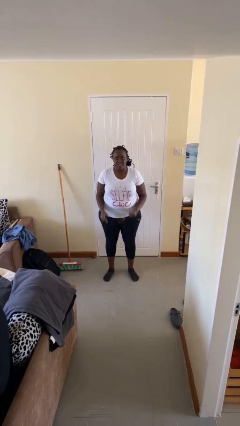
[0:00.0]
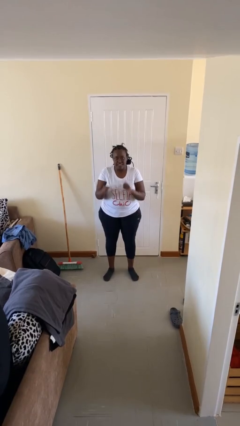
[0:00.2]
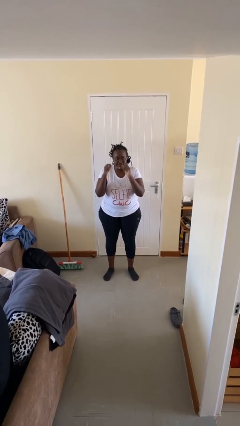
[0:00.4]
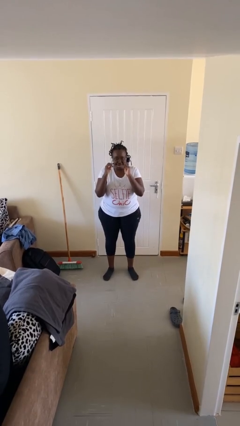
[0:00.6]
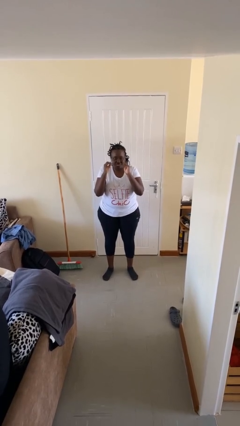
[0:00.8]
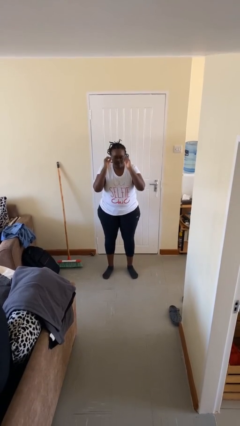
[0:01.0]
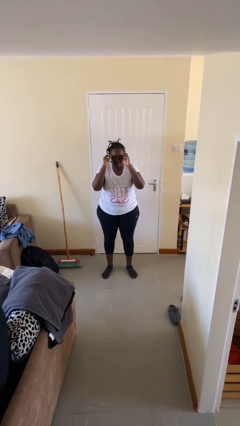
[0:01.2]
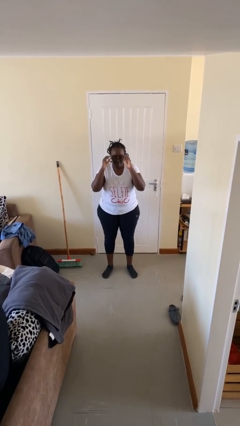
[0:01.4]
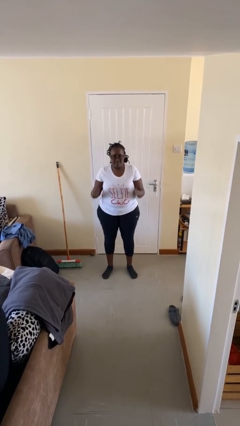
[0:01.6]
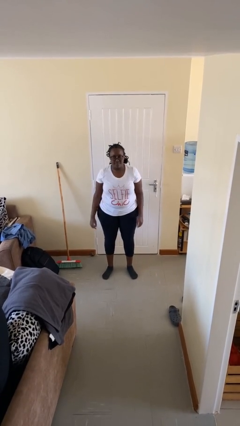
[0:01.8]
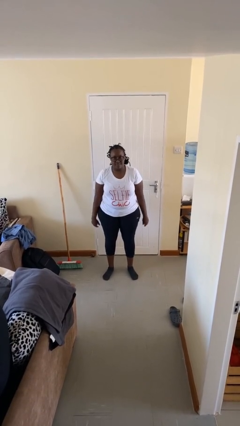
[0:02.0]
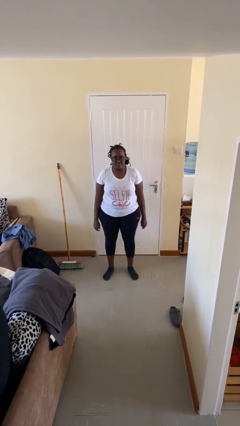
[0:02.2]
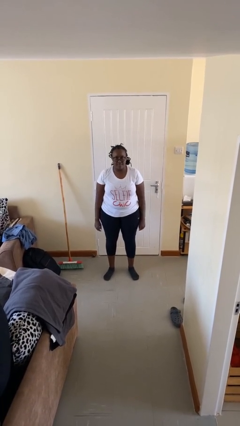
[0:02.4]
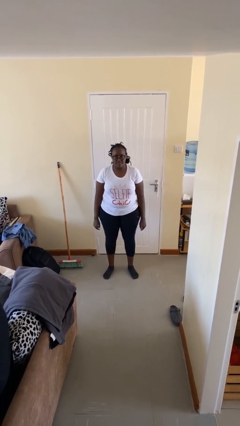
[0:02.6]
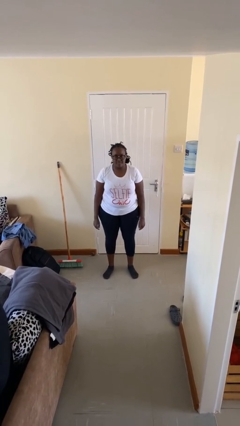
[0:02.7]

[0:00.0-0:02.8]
person puts on glasses

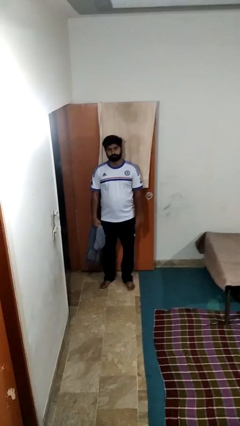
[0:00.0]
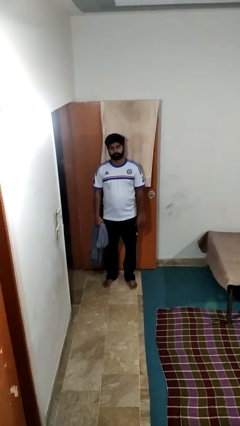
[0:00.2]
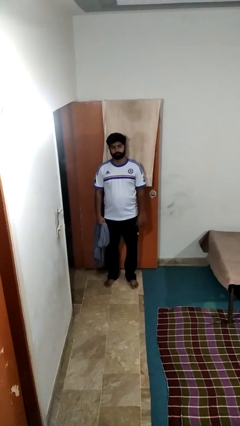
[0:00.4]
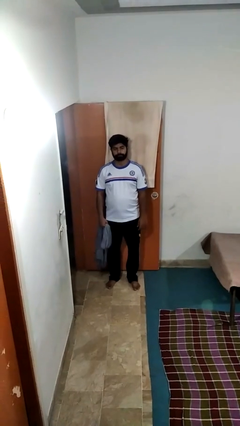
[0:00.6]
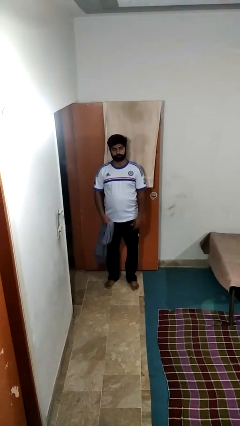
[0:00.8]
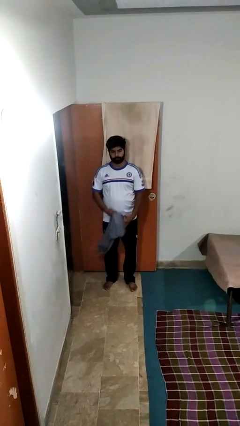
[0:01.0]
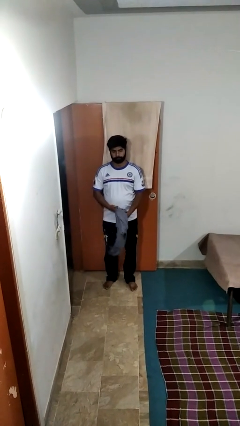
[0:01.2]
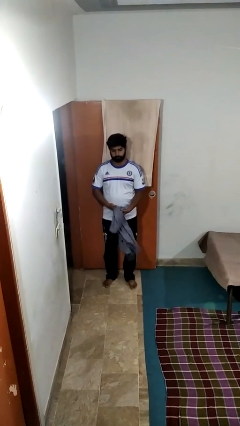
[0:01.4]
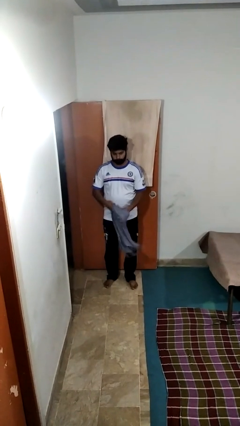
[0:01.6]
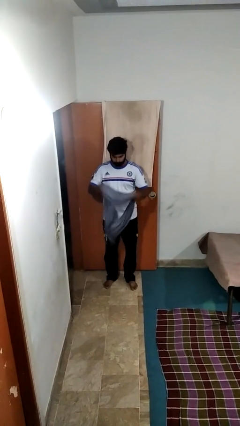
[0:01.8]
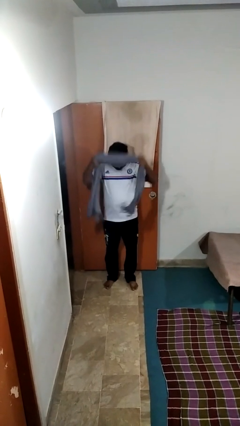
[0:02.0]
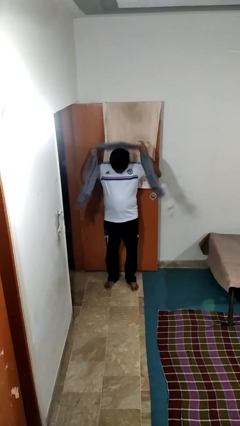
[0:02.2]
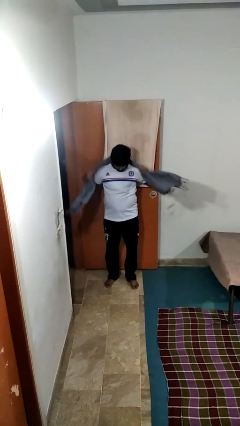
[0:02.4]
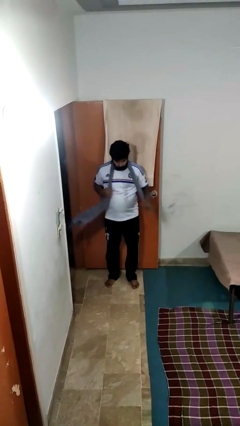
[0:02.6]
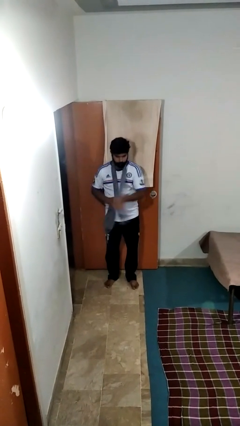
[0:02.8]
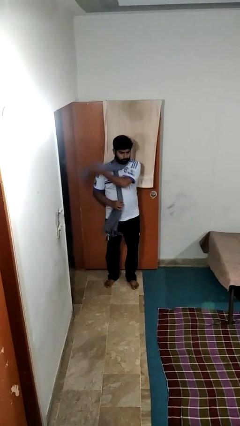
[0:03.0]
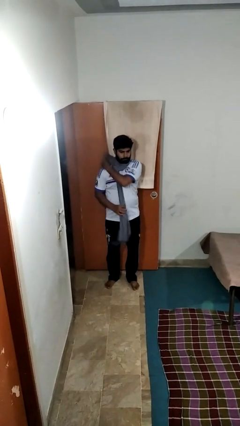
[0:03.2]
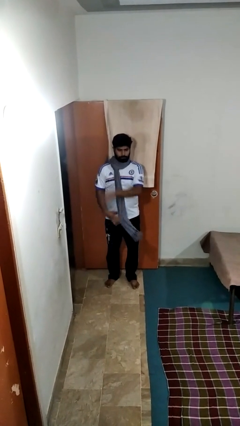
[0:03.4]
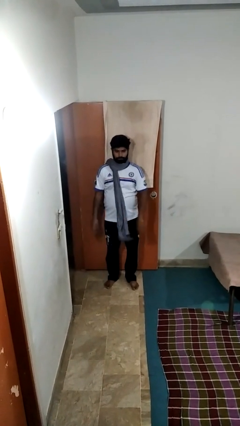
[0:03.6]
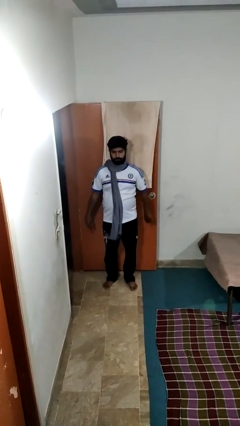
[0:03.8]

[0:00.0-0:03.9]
person puts on scarf

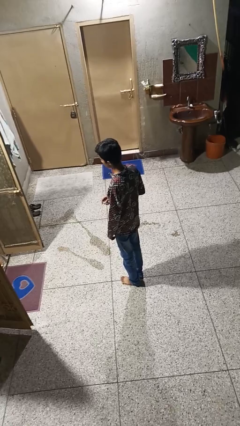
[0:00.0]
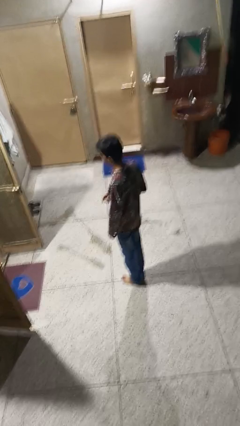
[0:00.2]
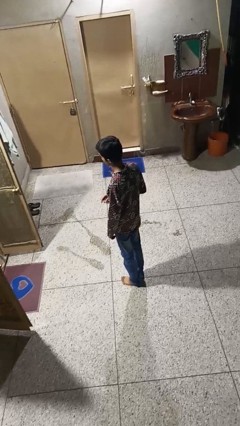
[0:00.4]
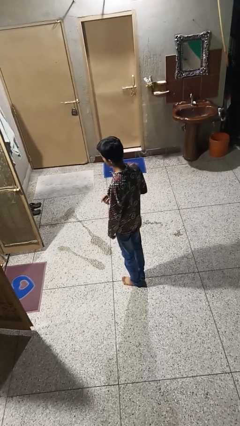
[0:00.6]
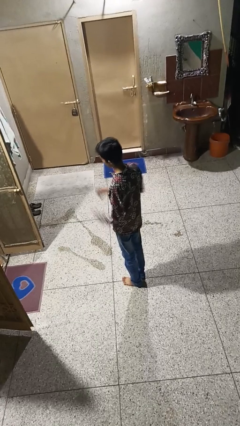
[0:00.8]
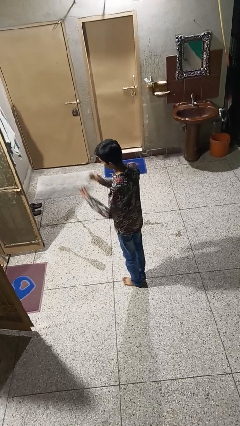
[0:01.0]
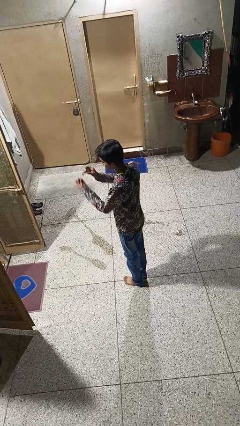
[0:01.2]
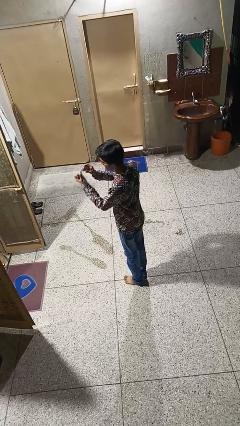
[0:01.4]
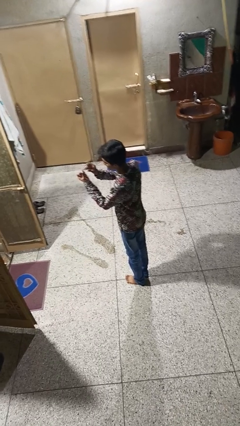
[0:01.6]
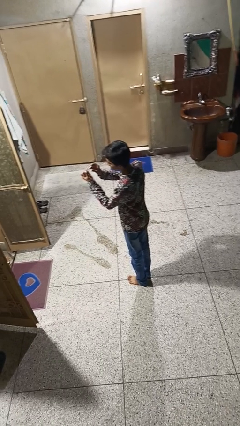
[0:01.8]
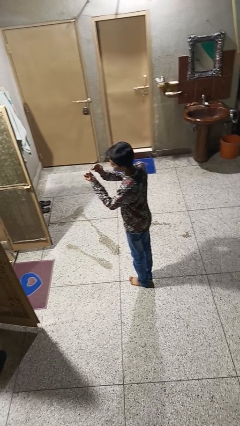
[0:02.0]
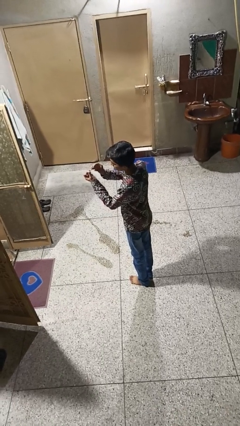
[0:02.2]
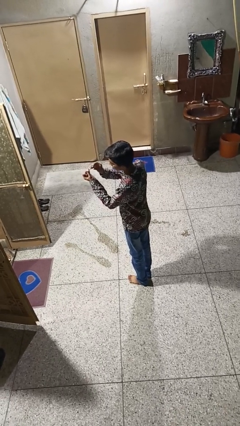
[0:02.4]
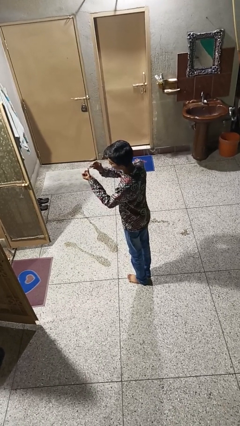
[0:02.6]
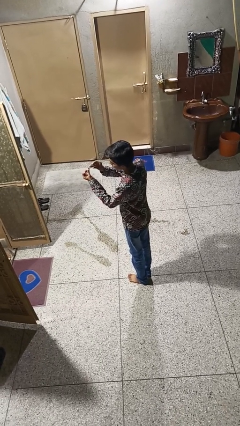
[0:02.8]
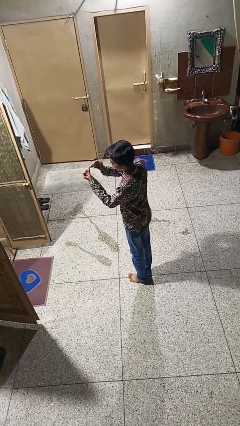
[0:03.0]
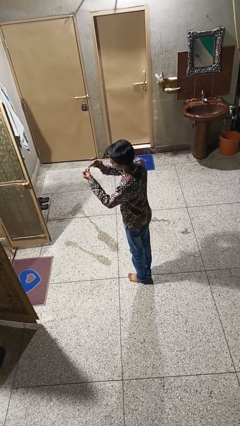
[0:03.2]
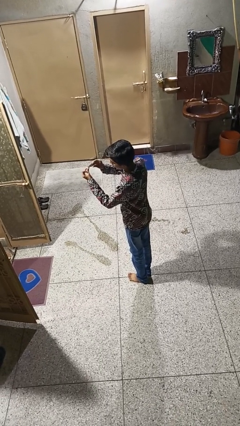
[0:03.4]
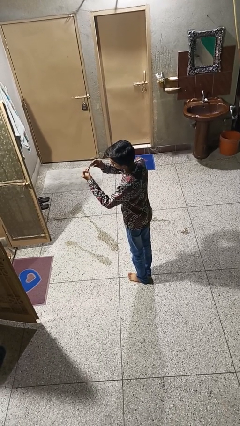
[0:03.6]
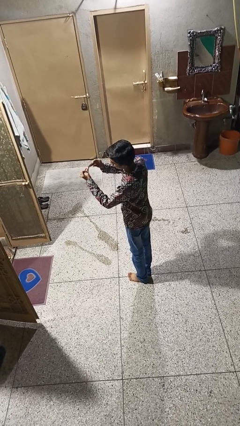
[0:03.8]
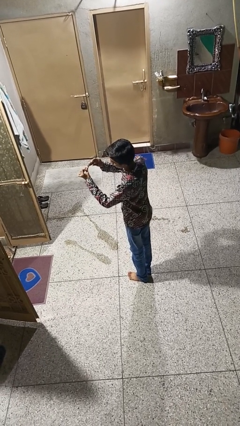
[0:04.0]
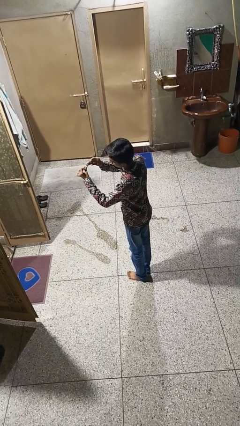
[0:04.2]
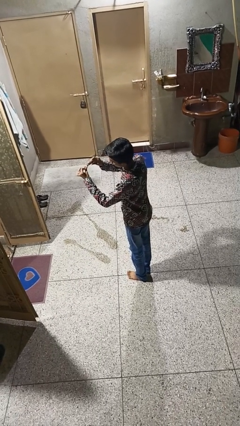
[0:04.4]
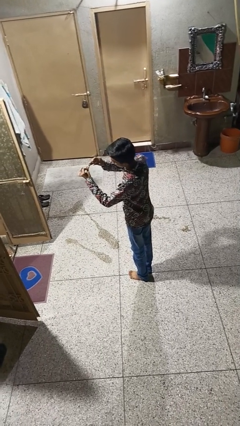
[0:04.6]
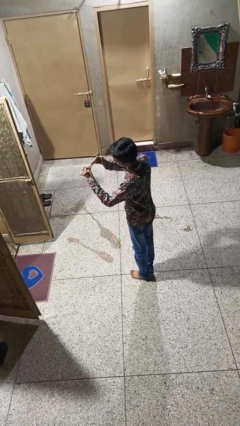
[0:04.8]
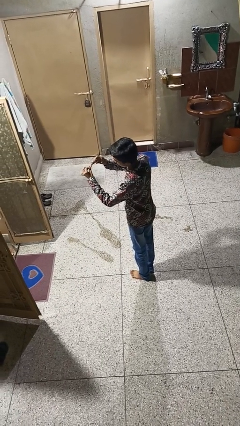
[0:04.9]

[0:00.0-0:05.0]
person clips fingernails

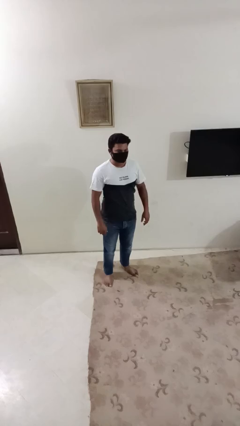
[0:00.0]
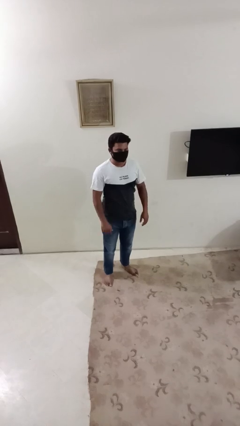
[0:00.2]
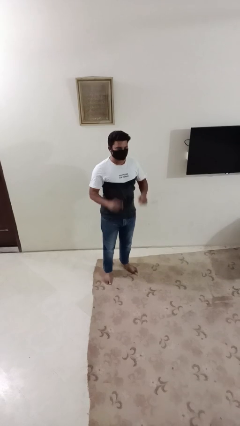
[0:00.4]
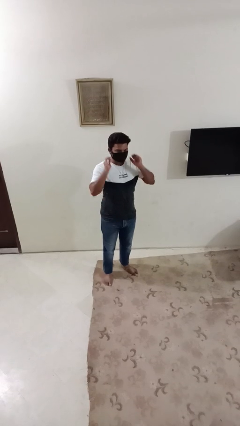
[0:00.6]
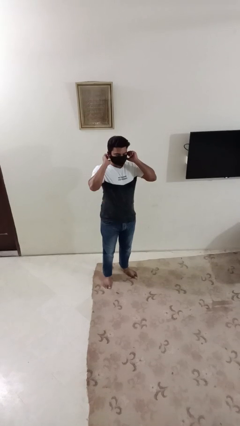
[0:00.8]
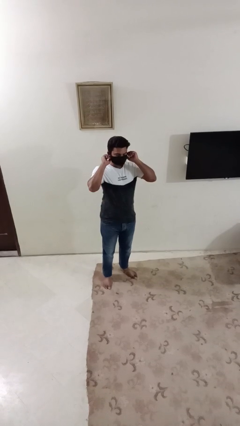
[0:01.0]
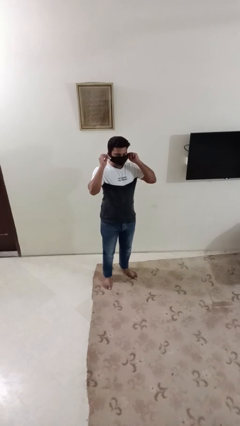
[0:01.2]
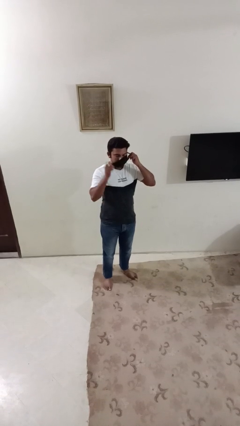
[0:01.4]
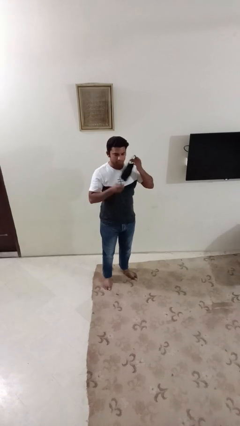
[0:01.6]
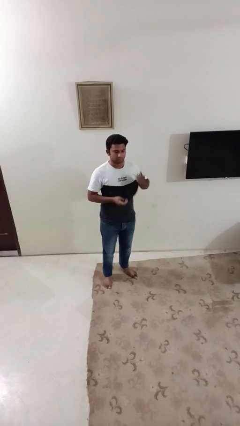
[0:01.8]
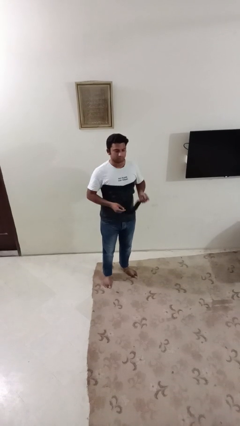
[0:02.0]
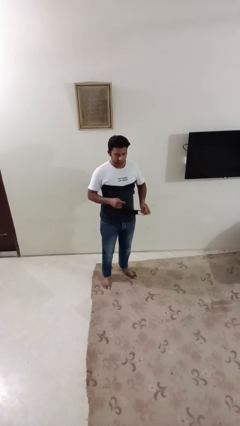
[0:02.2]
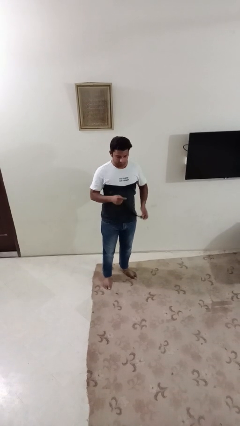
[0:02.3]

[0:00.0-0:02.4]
person takes off facemask

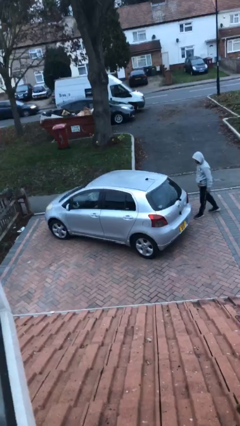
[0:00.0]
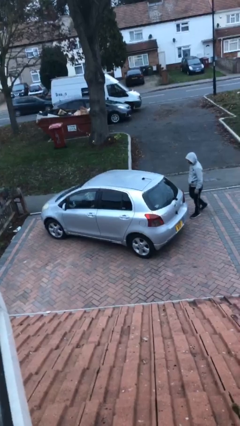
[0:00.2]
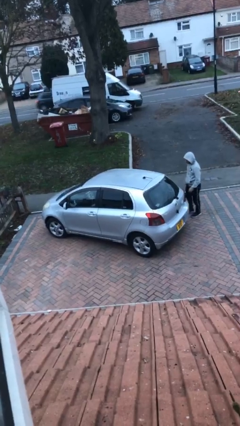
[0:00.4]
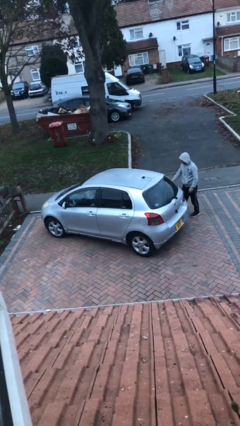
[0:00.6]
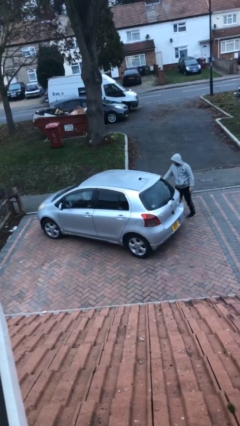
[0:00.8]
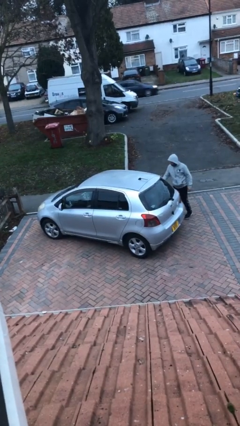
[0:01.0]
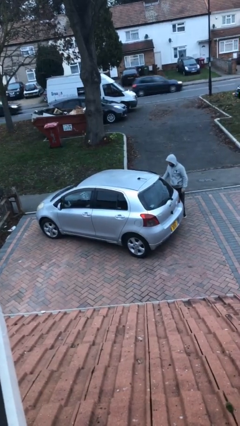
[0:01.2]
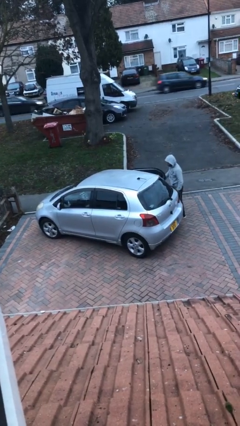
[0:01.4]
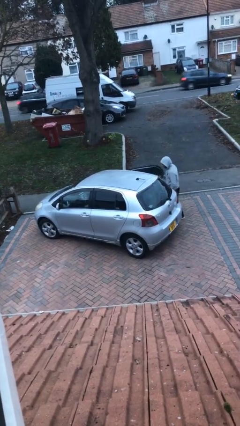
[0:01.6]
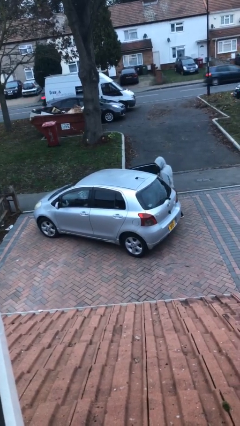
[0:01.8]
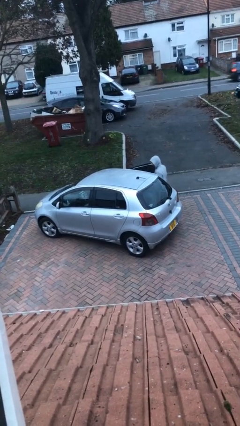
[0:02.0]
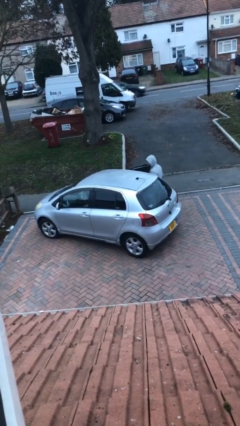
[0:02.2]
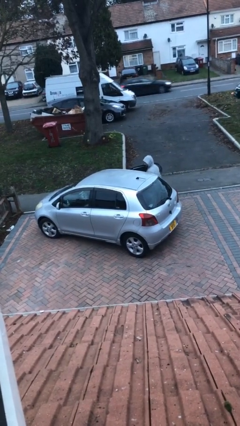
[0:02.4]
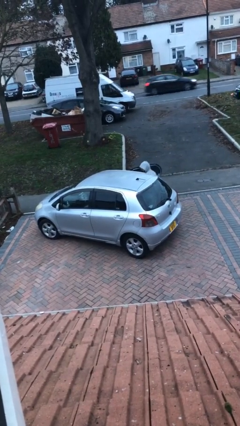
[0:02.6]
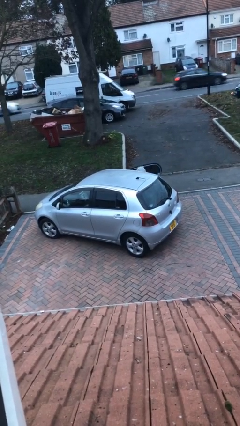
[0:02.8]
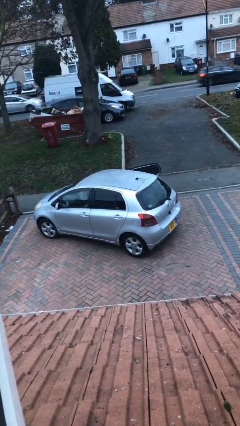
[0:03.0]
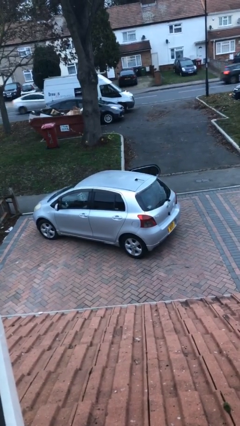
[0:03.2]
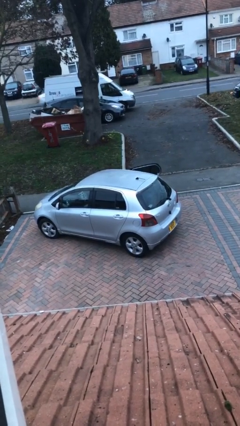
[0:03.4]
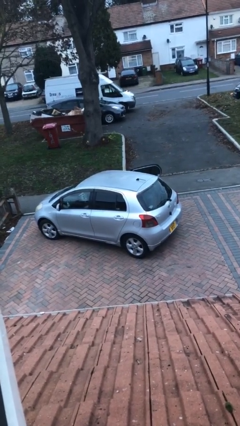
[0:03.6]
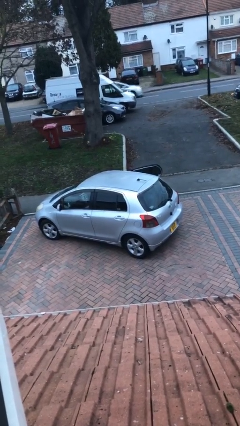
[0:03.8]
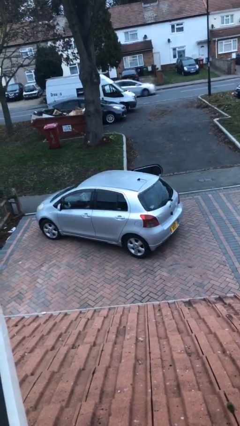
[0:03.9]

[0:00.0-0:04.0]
car picks up person
